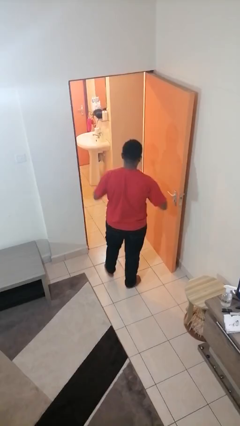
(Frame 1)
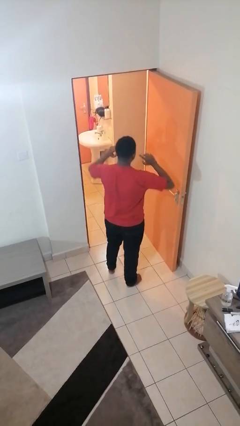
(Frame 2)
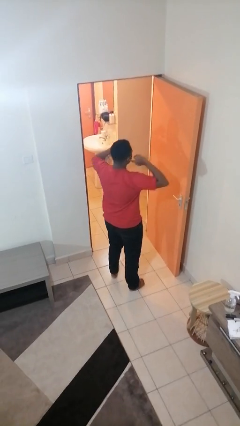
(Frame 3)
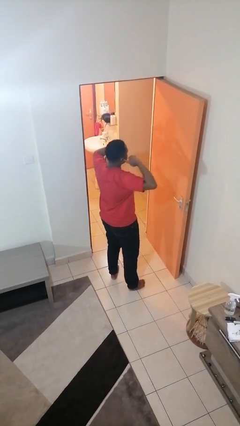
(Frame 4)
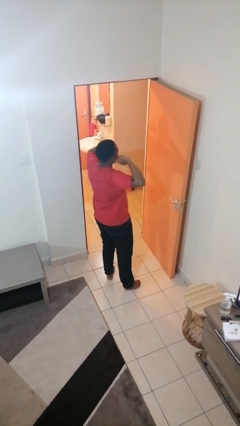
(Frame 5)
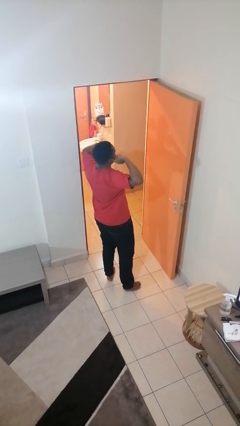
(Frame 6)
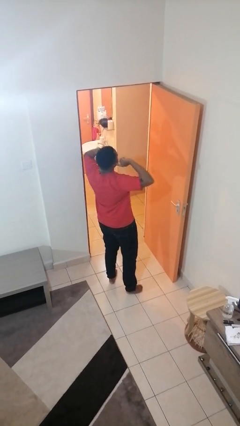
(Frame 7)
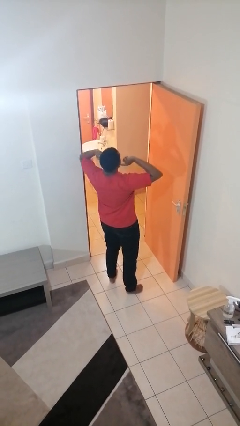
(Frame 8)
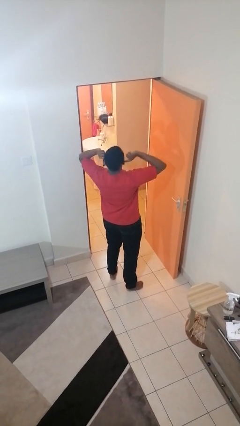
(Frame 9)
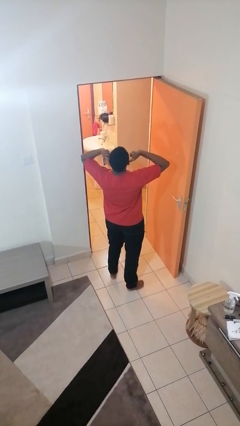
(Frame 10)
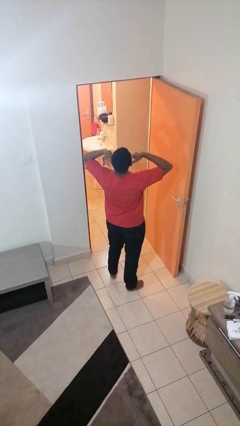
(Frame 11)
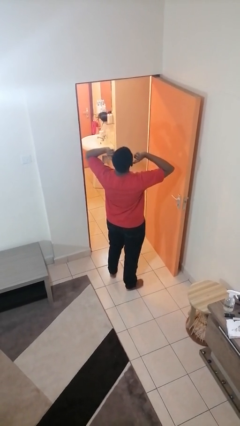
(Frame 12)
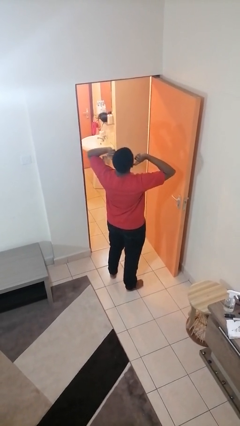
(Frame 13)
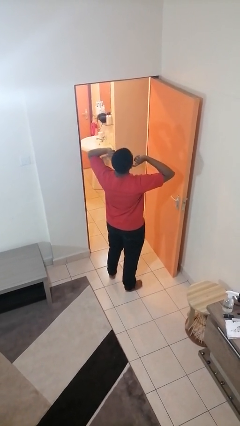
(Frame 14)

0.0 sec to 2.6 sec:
person puts fingers in ear

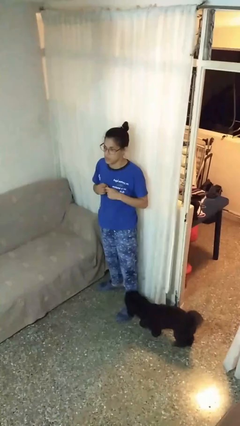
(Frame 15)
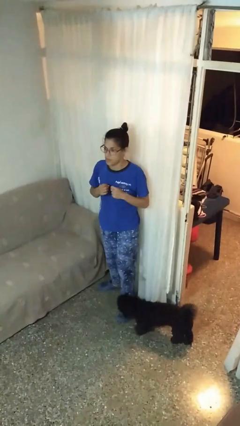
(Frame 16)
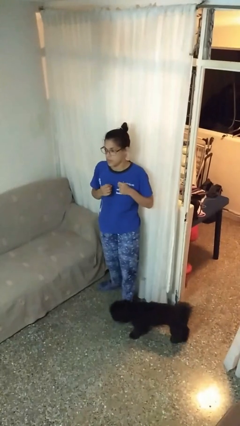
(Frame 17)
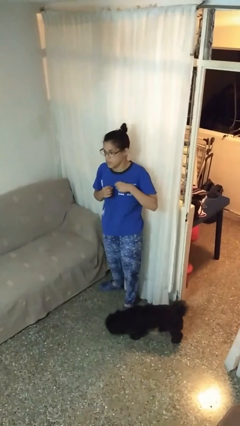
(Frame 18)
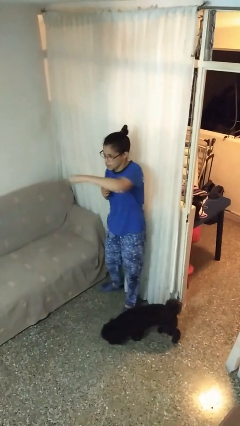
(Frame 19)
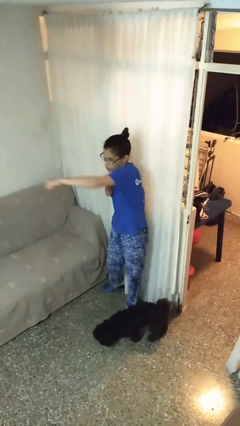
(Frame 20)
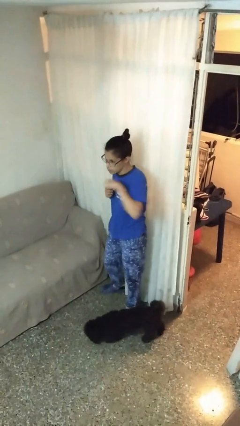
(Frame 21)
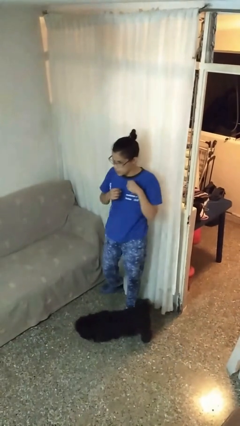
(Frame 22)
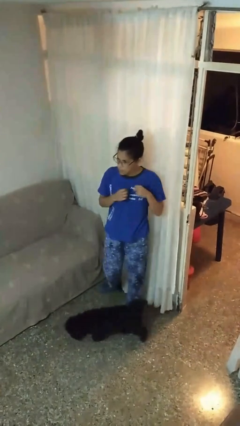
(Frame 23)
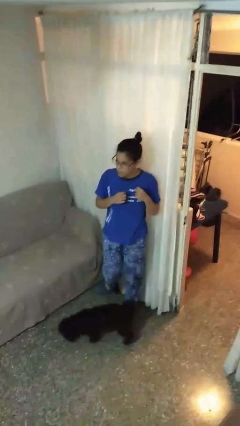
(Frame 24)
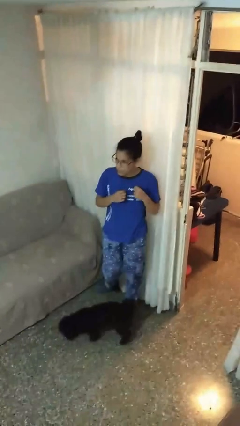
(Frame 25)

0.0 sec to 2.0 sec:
person punches

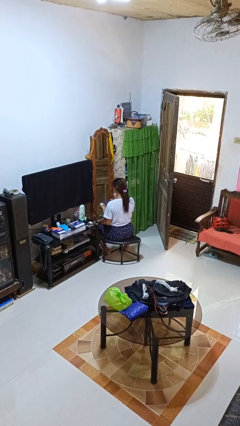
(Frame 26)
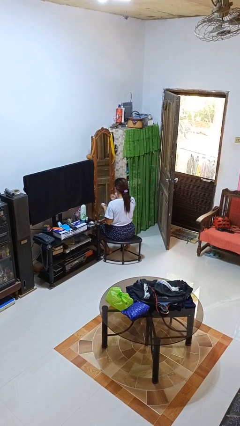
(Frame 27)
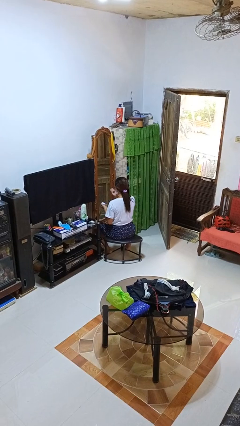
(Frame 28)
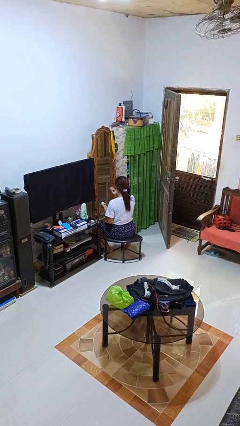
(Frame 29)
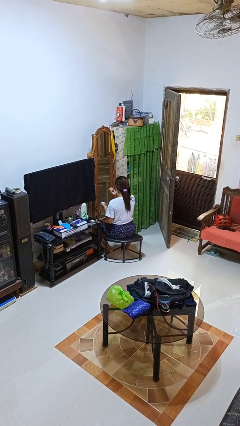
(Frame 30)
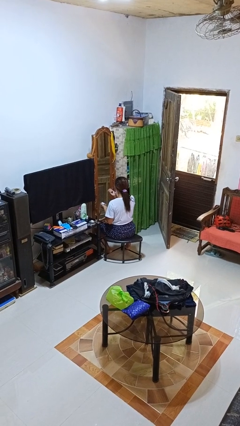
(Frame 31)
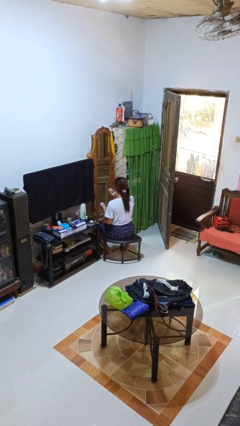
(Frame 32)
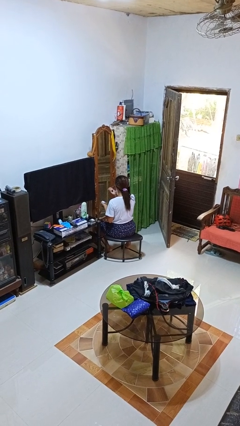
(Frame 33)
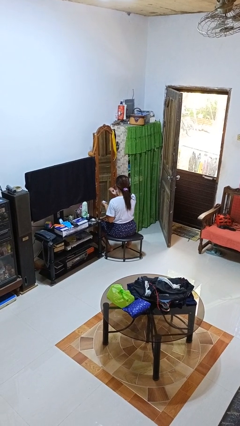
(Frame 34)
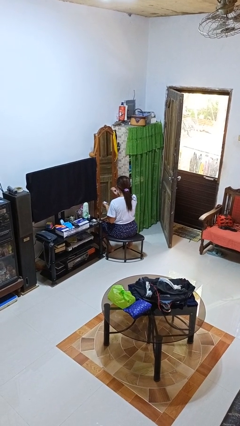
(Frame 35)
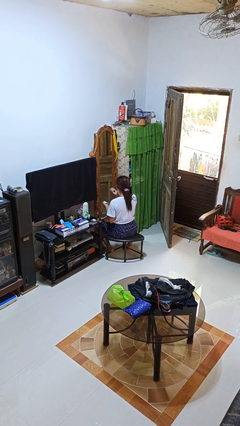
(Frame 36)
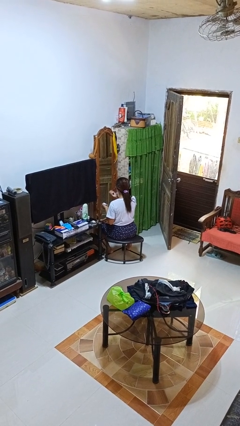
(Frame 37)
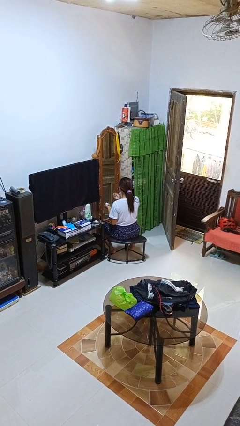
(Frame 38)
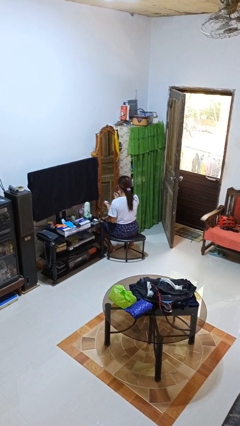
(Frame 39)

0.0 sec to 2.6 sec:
person applies eye makeup

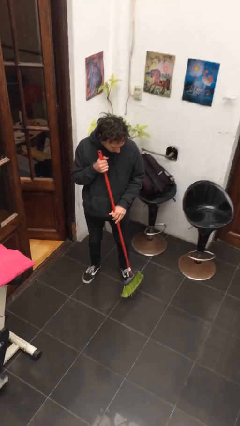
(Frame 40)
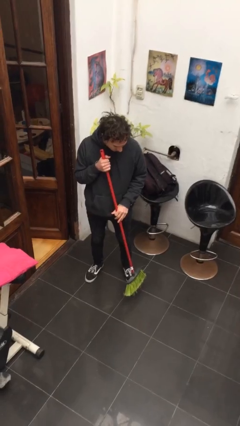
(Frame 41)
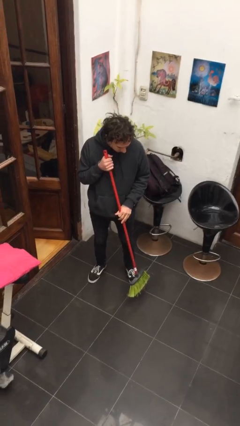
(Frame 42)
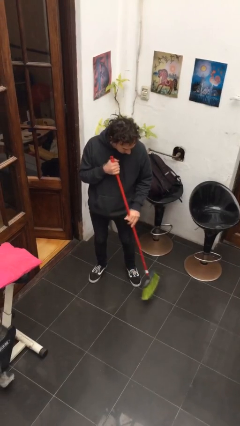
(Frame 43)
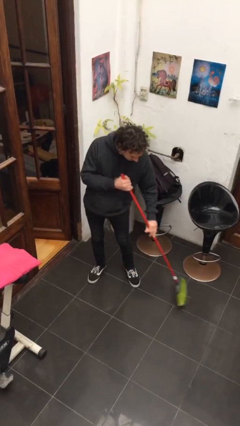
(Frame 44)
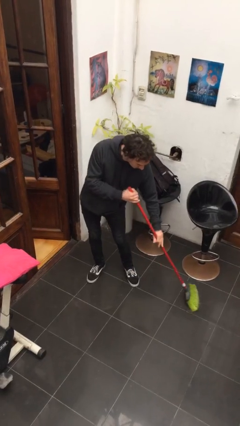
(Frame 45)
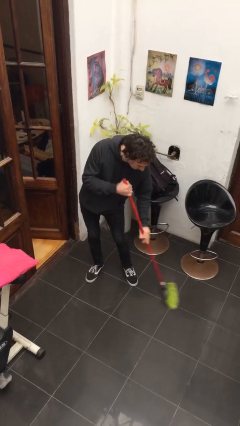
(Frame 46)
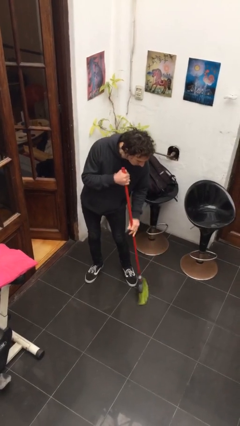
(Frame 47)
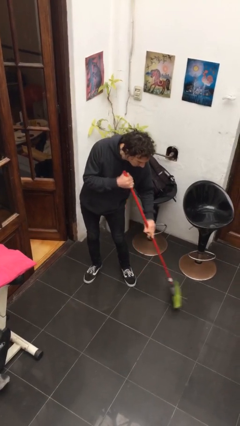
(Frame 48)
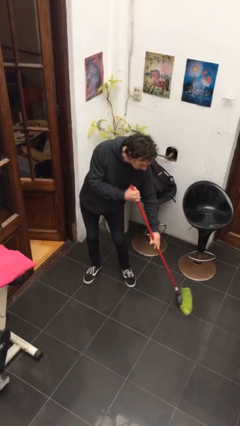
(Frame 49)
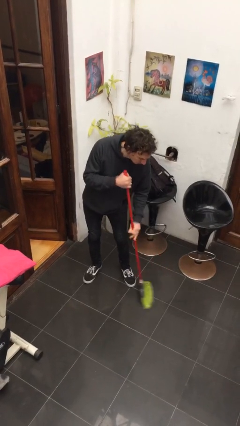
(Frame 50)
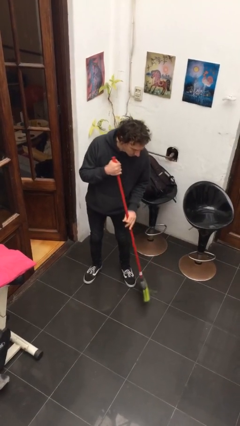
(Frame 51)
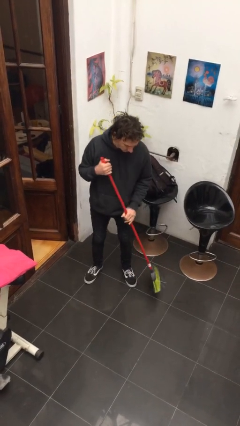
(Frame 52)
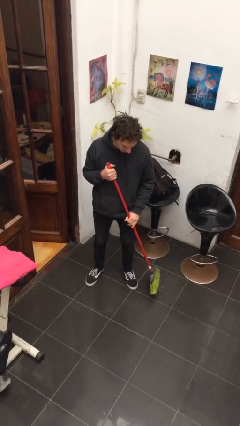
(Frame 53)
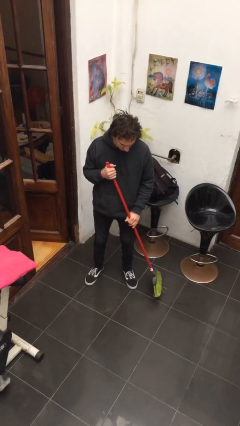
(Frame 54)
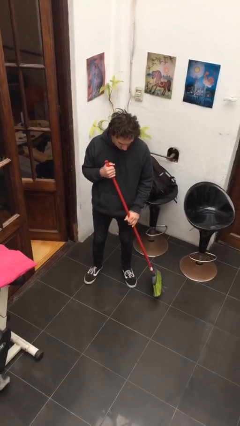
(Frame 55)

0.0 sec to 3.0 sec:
person sweeps floor

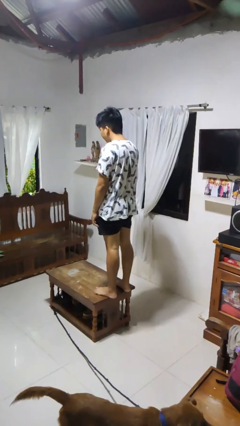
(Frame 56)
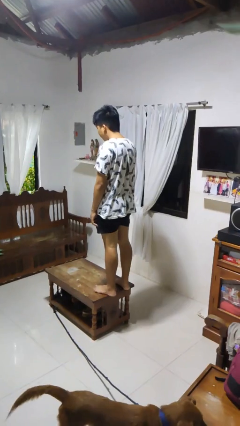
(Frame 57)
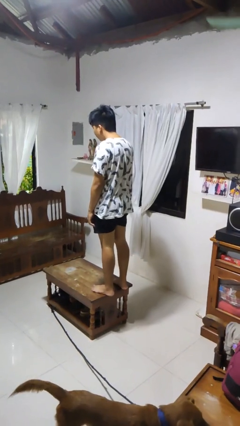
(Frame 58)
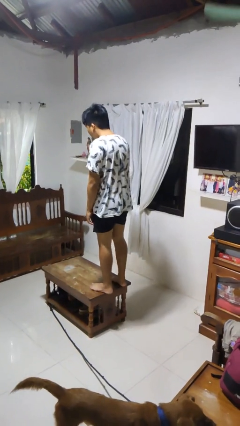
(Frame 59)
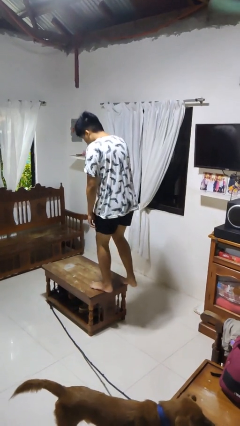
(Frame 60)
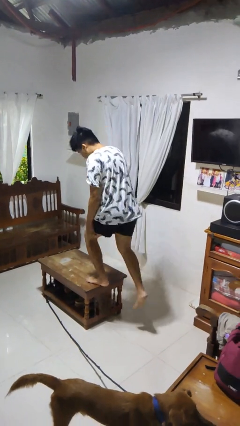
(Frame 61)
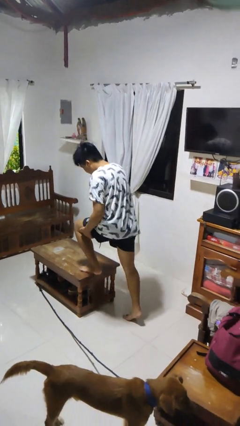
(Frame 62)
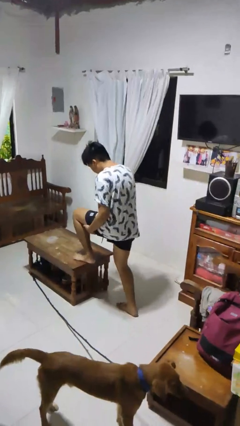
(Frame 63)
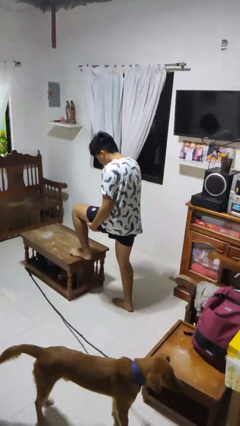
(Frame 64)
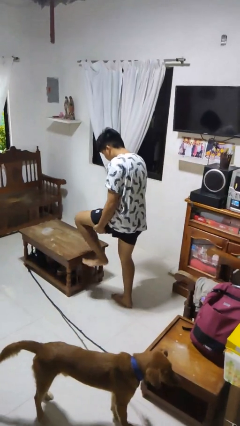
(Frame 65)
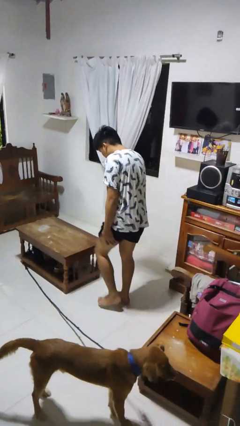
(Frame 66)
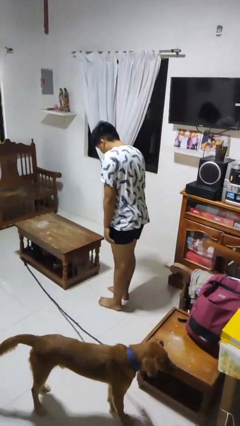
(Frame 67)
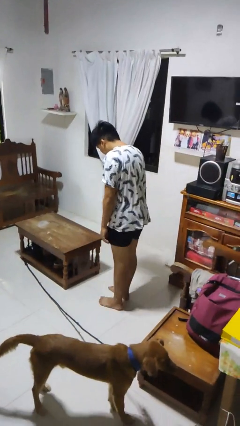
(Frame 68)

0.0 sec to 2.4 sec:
person climbs off table

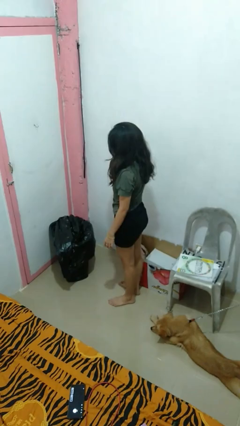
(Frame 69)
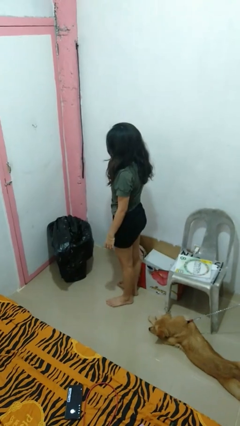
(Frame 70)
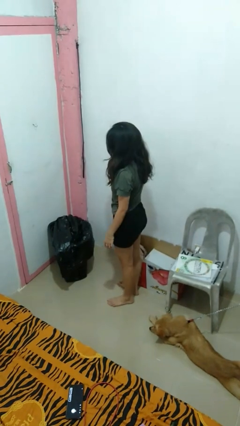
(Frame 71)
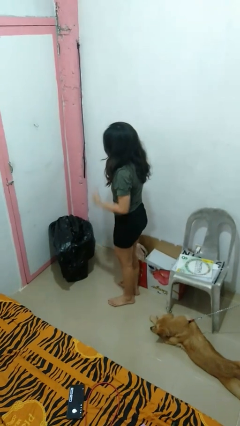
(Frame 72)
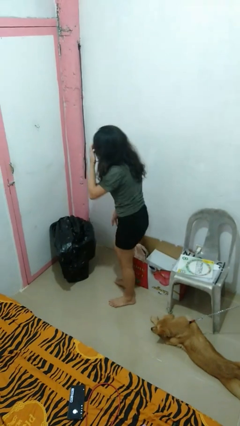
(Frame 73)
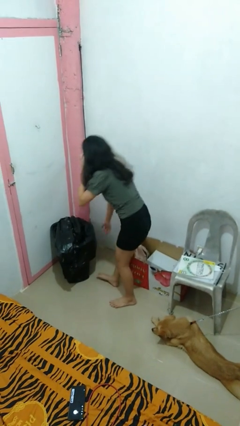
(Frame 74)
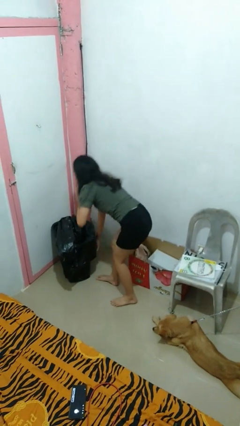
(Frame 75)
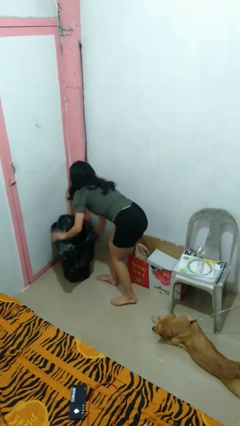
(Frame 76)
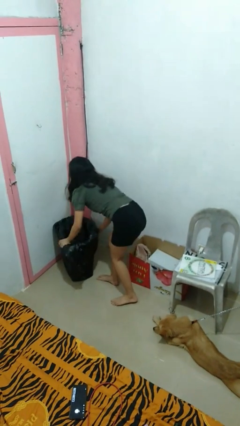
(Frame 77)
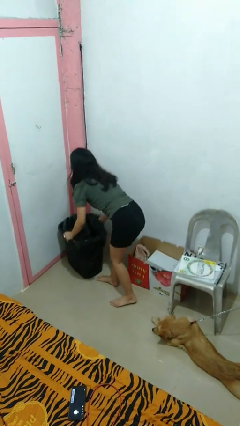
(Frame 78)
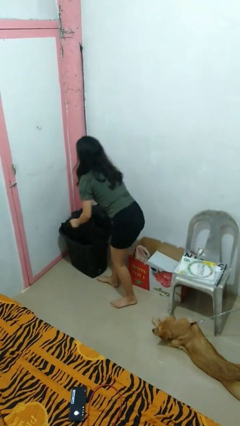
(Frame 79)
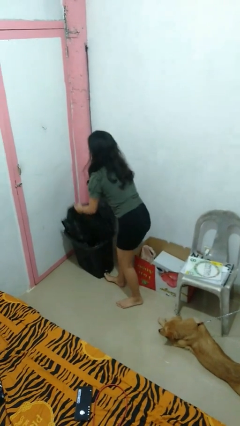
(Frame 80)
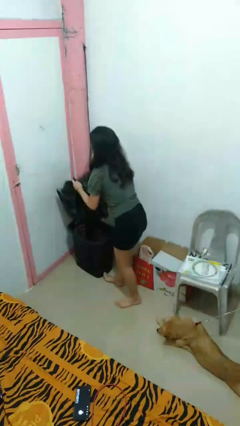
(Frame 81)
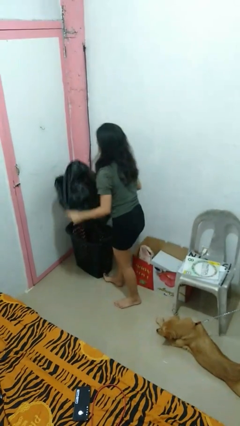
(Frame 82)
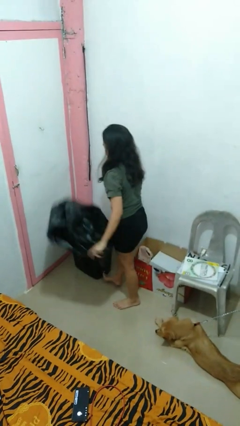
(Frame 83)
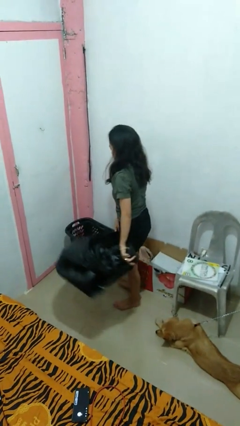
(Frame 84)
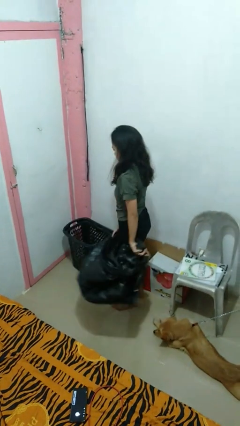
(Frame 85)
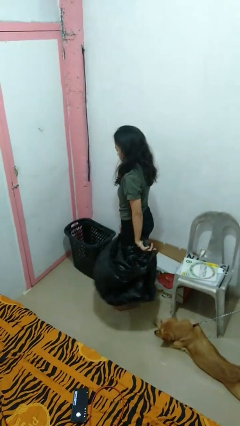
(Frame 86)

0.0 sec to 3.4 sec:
person removes trashbag from trashcan

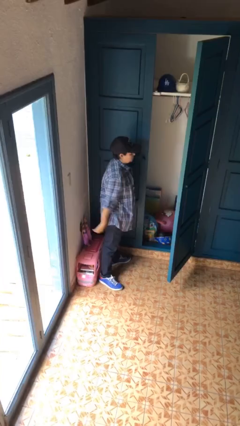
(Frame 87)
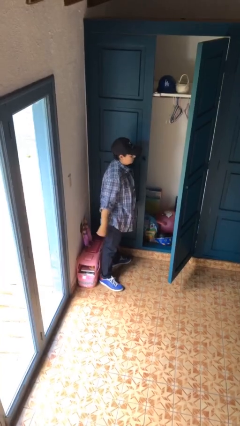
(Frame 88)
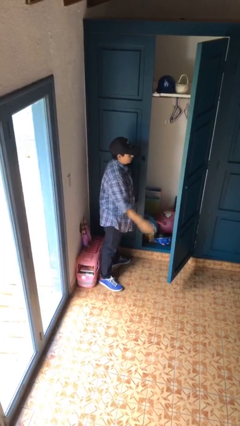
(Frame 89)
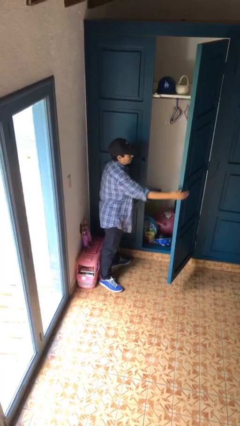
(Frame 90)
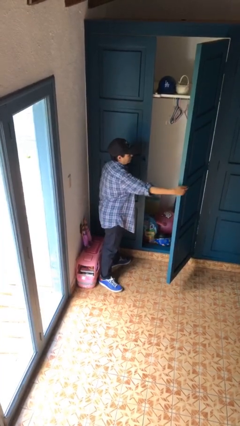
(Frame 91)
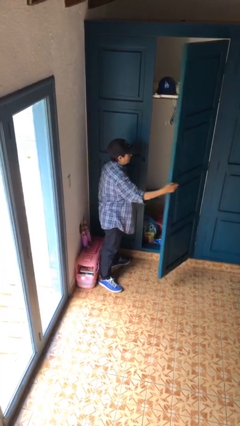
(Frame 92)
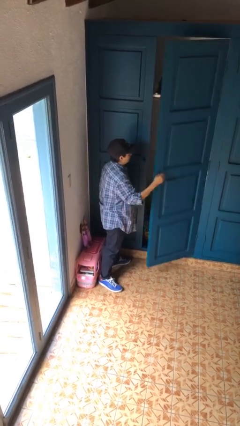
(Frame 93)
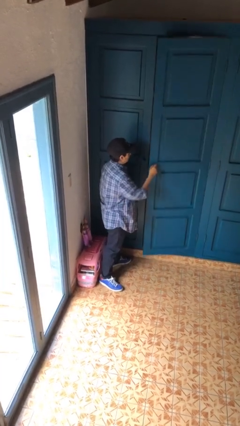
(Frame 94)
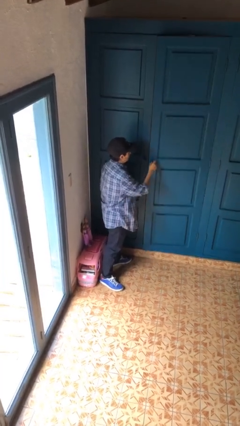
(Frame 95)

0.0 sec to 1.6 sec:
person closes closet door
